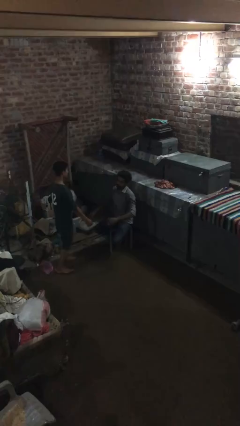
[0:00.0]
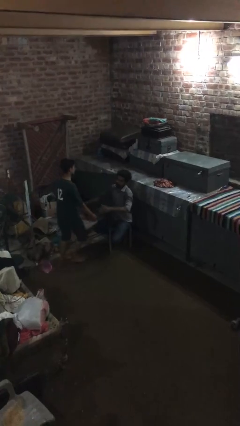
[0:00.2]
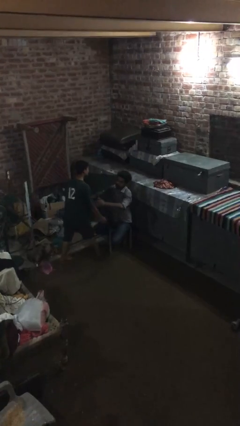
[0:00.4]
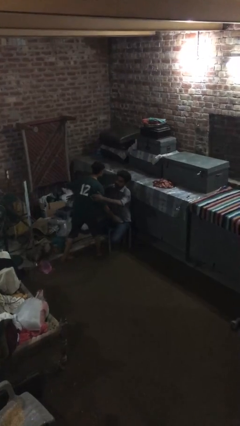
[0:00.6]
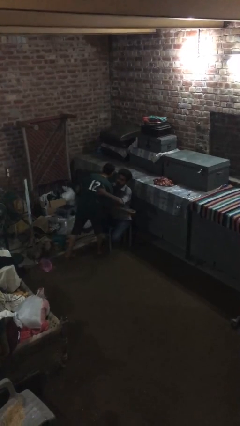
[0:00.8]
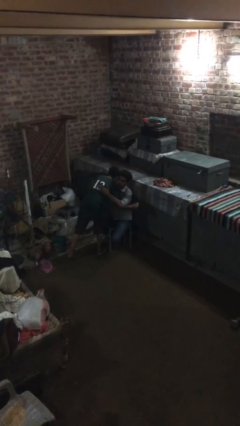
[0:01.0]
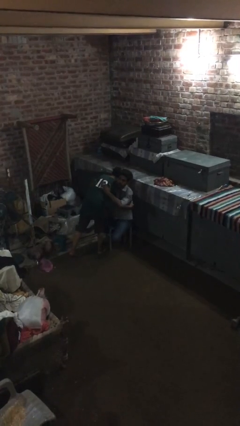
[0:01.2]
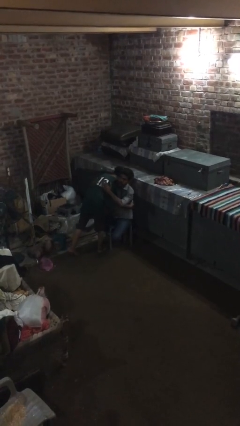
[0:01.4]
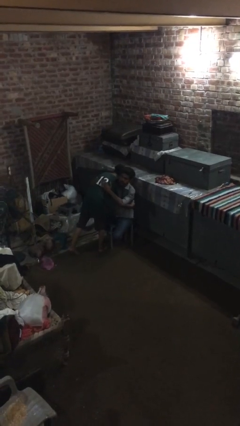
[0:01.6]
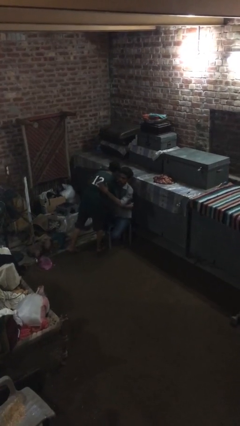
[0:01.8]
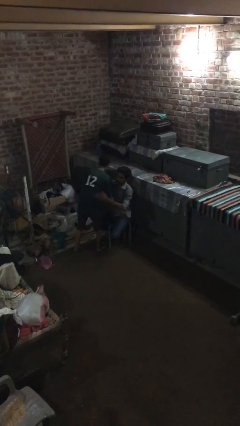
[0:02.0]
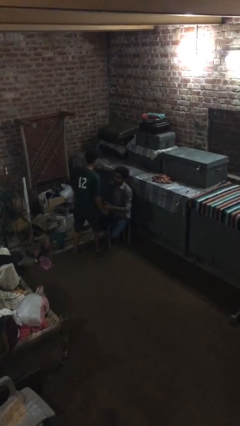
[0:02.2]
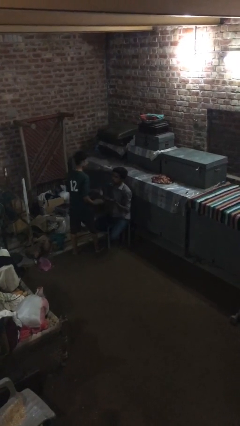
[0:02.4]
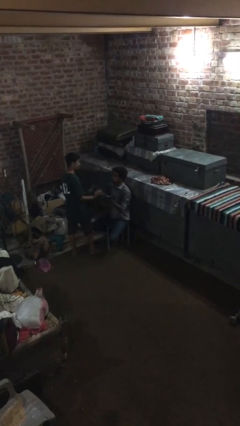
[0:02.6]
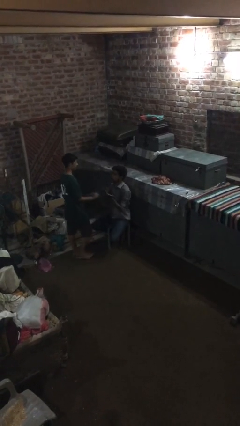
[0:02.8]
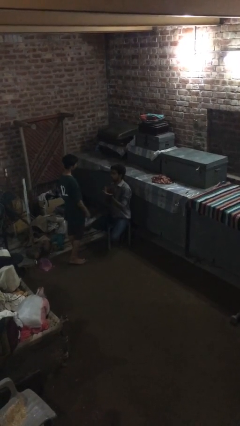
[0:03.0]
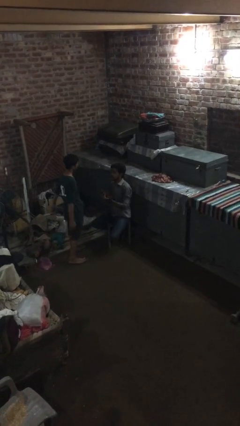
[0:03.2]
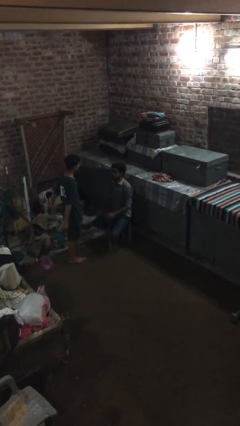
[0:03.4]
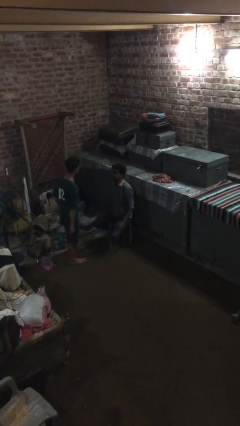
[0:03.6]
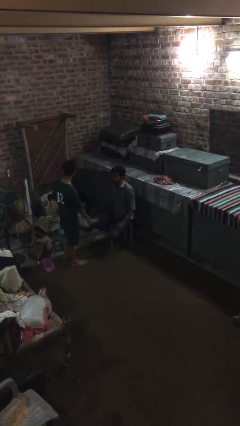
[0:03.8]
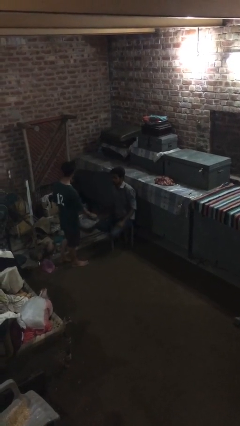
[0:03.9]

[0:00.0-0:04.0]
person embraces person

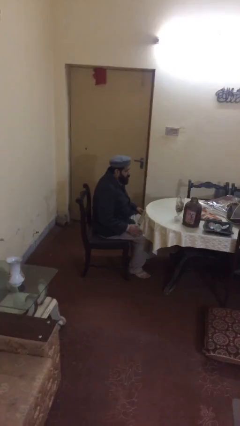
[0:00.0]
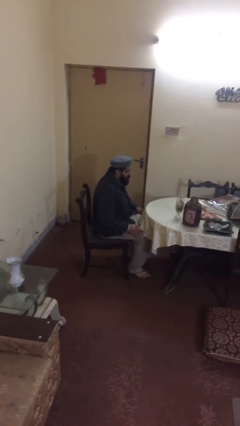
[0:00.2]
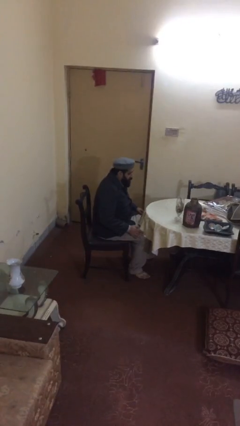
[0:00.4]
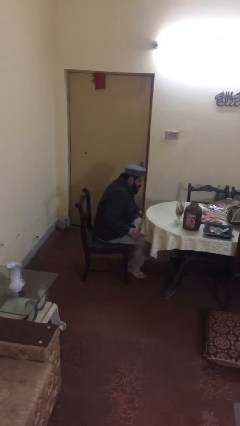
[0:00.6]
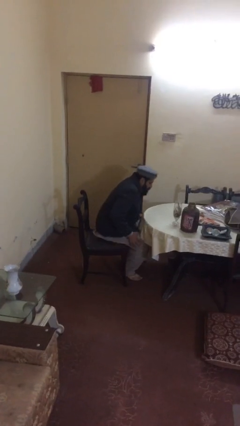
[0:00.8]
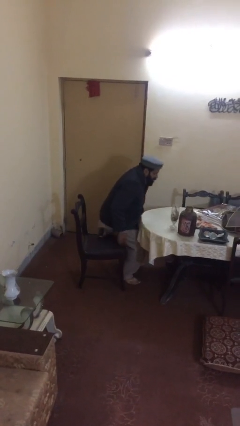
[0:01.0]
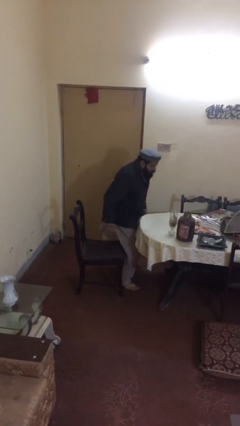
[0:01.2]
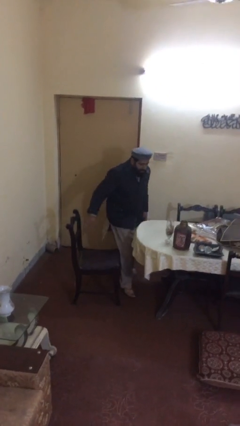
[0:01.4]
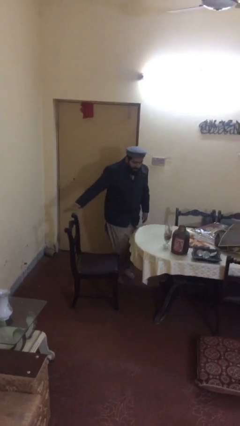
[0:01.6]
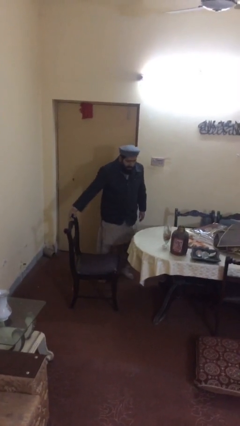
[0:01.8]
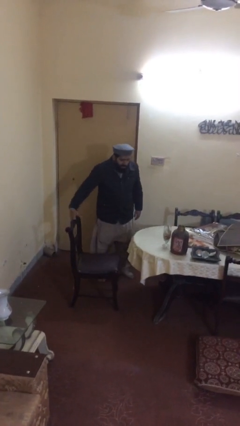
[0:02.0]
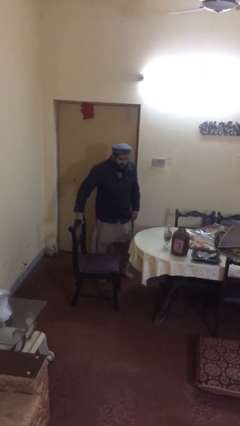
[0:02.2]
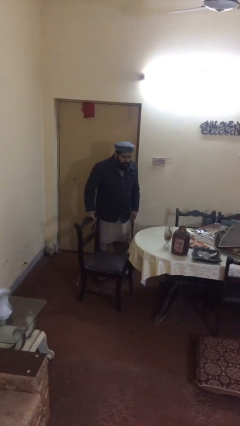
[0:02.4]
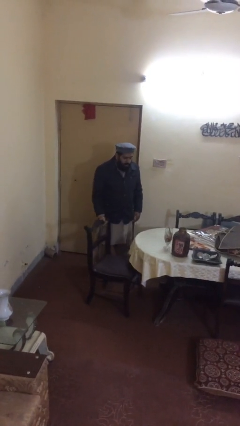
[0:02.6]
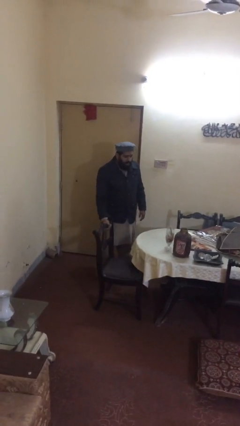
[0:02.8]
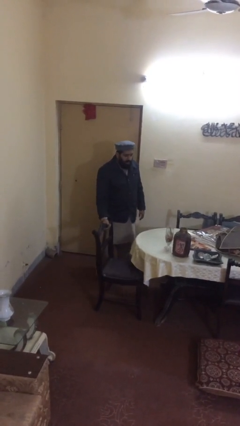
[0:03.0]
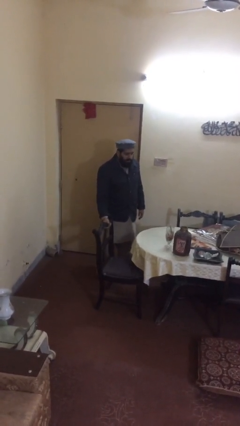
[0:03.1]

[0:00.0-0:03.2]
person stands up

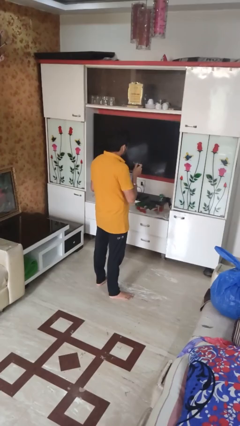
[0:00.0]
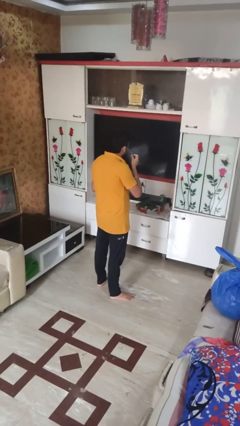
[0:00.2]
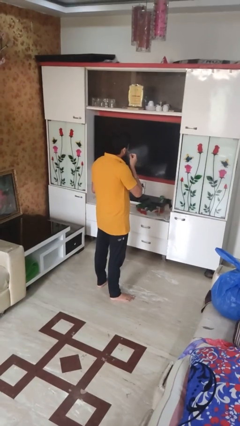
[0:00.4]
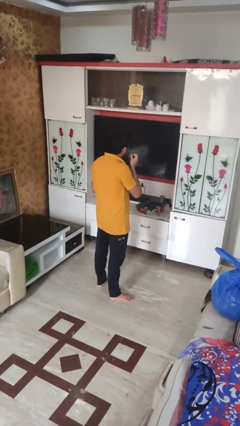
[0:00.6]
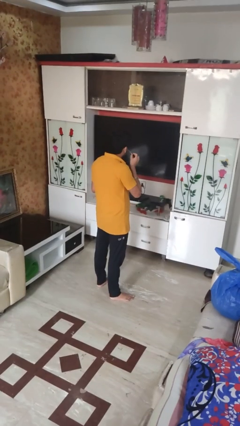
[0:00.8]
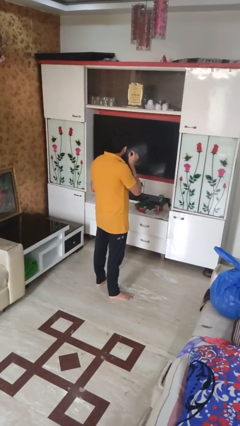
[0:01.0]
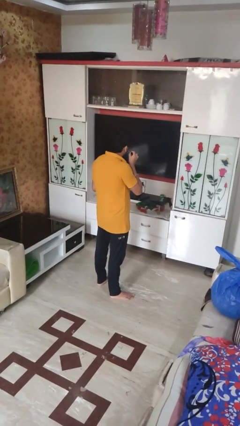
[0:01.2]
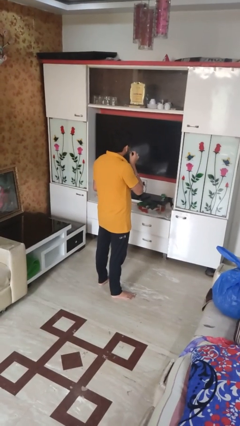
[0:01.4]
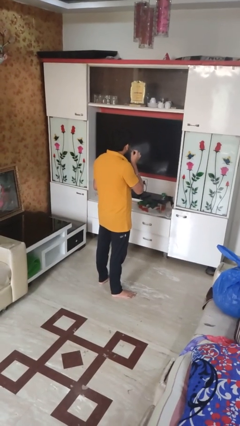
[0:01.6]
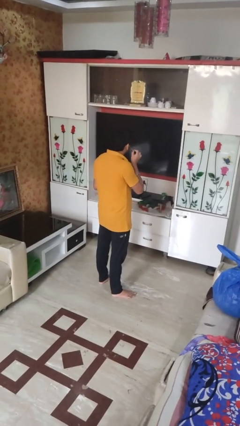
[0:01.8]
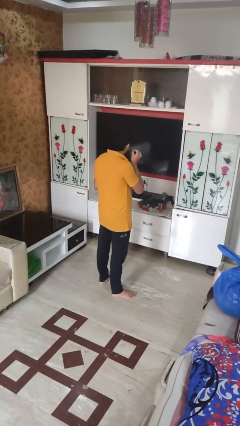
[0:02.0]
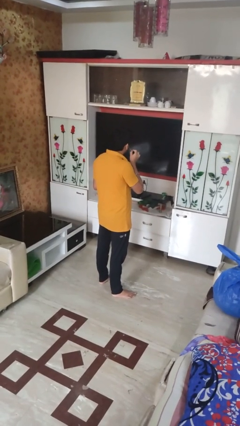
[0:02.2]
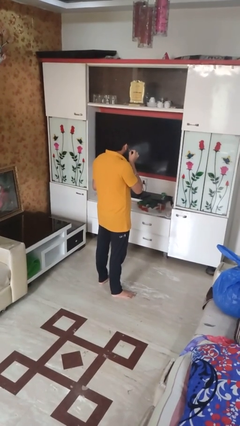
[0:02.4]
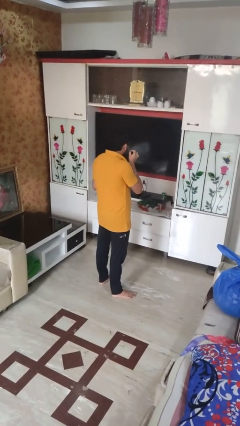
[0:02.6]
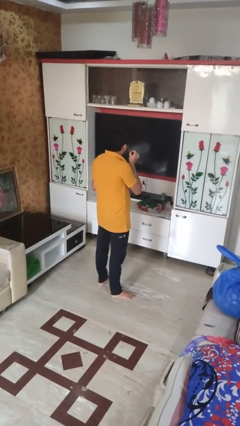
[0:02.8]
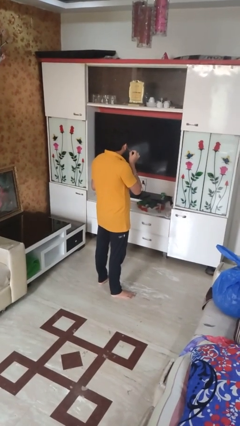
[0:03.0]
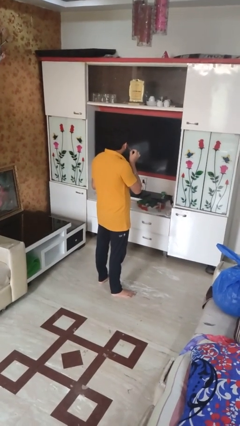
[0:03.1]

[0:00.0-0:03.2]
person applies lip makeup

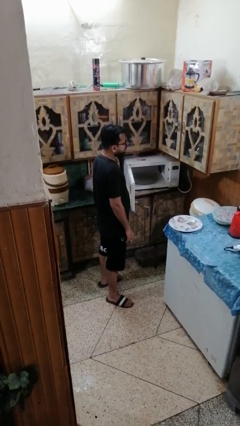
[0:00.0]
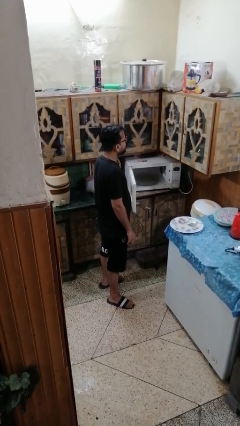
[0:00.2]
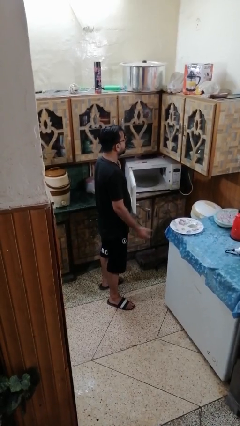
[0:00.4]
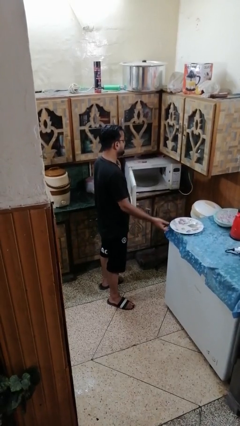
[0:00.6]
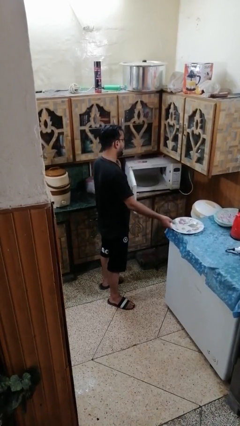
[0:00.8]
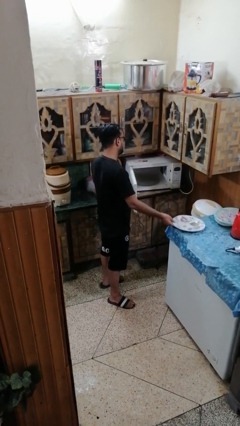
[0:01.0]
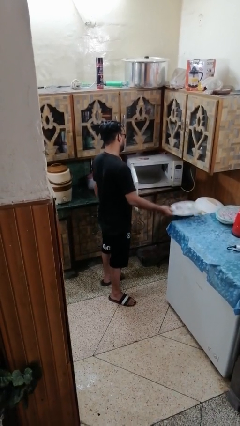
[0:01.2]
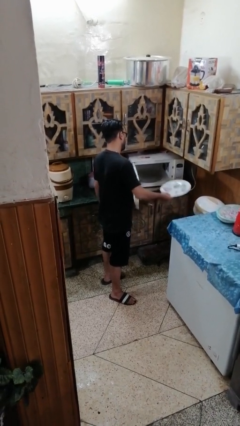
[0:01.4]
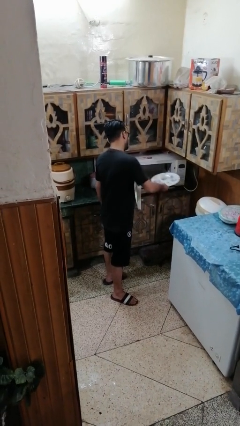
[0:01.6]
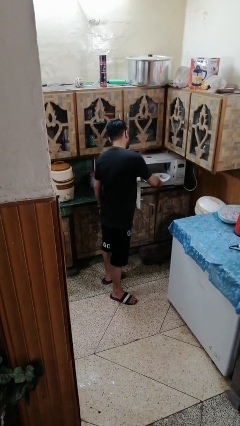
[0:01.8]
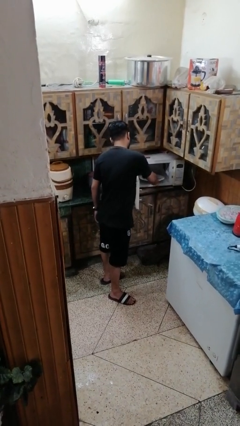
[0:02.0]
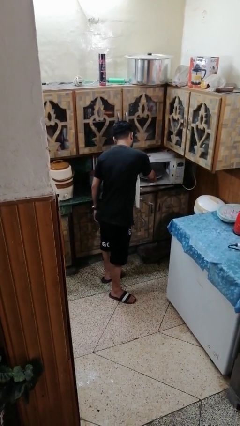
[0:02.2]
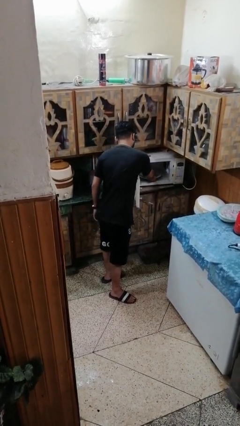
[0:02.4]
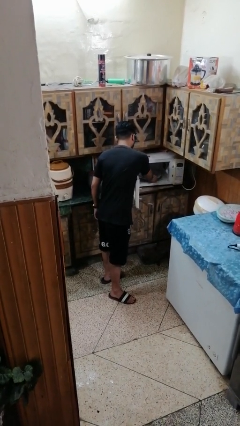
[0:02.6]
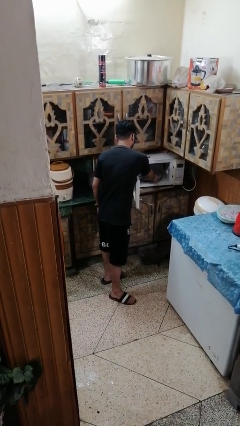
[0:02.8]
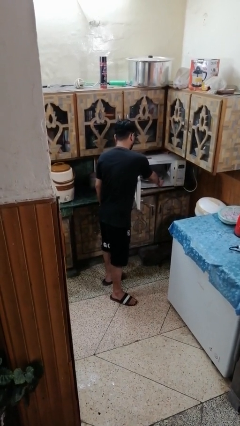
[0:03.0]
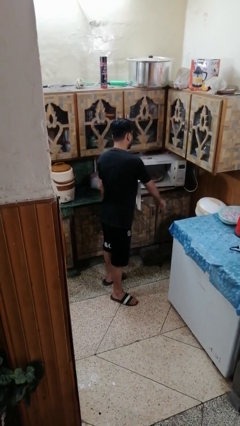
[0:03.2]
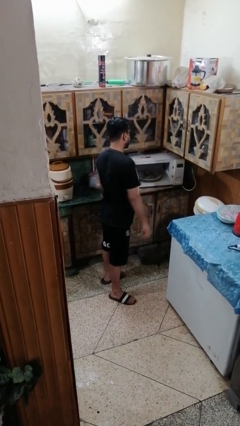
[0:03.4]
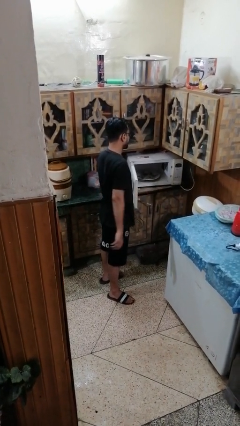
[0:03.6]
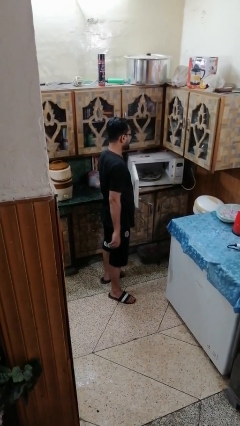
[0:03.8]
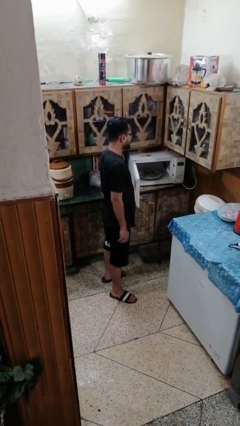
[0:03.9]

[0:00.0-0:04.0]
person puts object into microwave

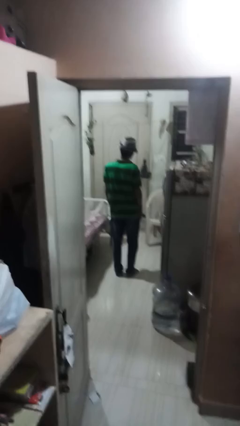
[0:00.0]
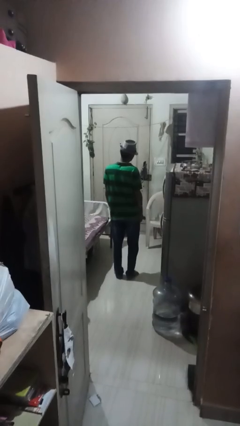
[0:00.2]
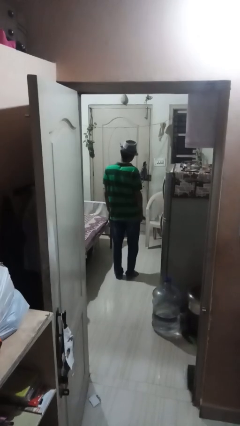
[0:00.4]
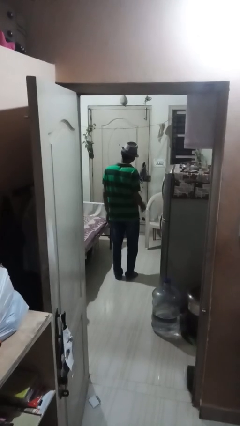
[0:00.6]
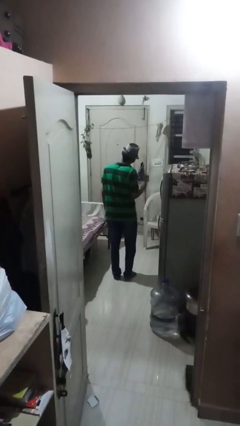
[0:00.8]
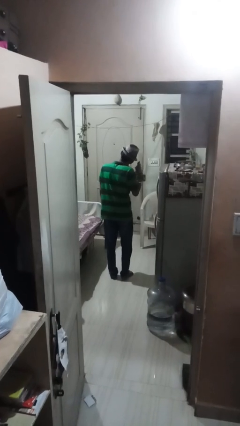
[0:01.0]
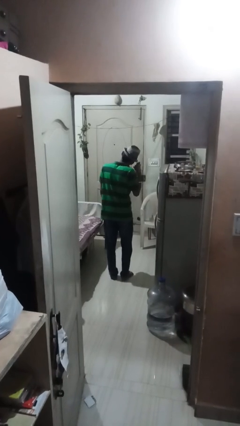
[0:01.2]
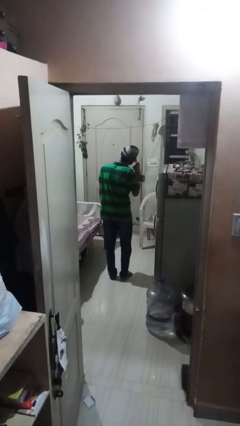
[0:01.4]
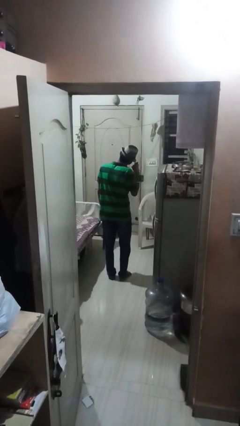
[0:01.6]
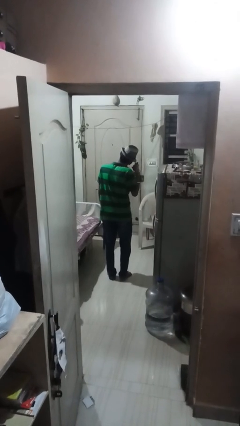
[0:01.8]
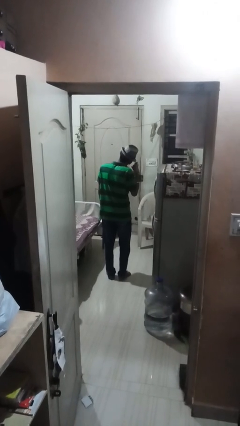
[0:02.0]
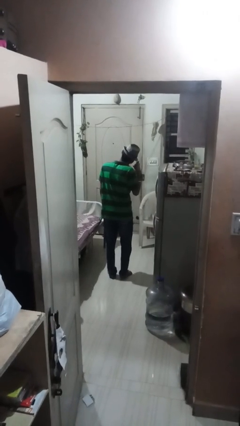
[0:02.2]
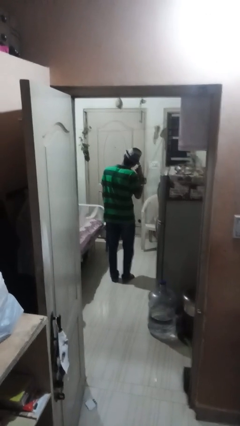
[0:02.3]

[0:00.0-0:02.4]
person gestures call me

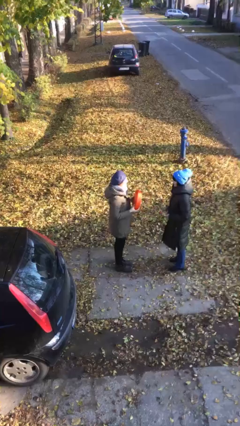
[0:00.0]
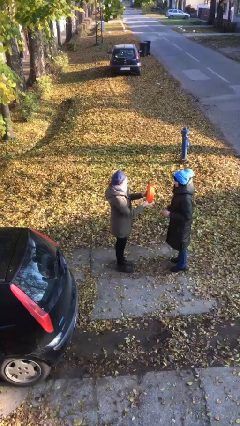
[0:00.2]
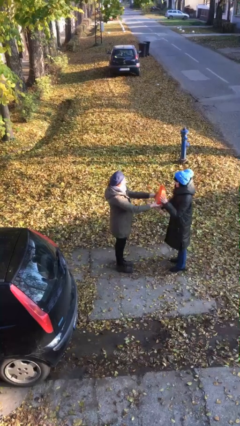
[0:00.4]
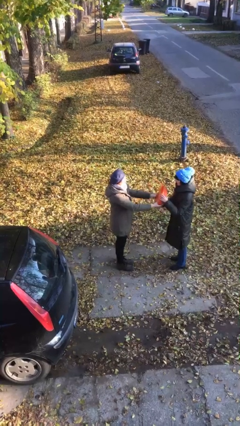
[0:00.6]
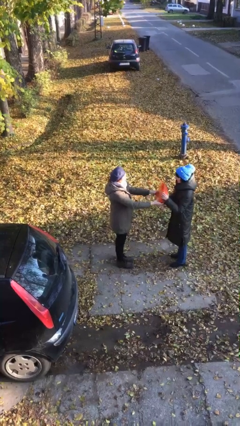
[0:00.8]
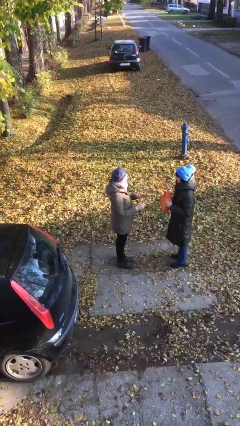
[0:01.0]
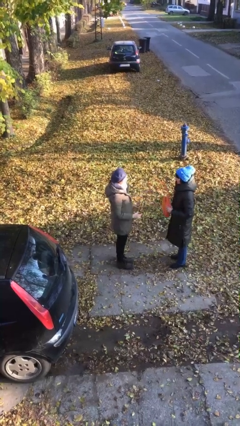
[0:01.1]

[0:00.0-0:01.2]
person transfers object to person
